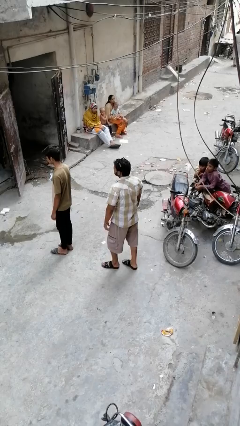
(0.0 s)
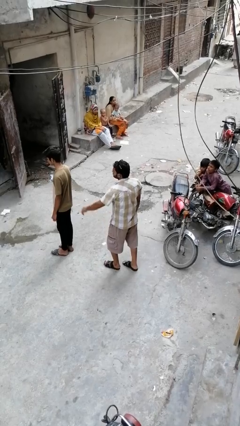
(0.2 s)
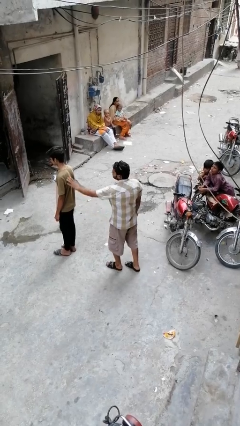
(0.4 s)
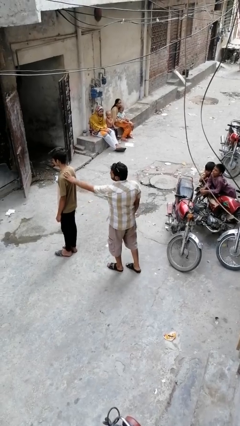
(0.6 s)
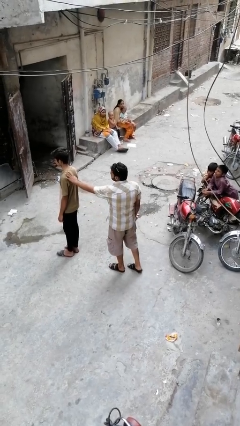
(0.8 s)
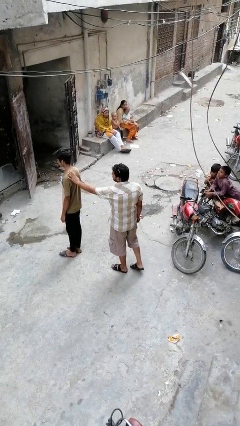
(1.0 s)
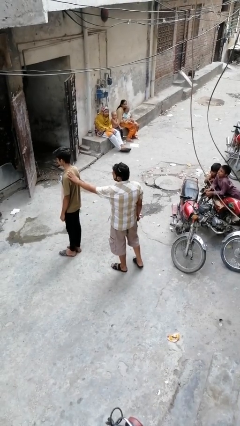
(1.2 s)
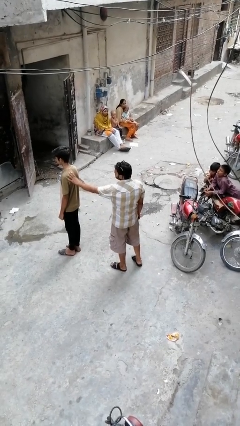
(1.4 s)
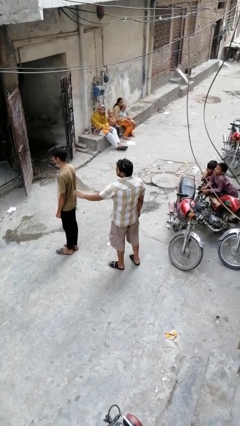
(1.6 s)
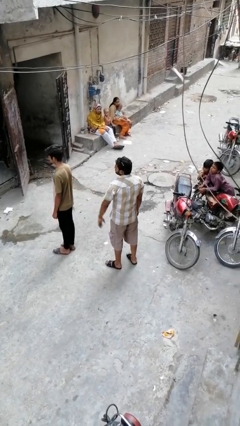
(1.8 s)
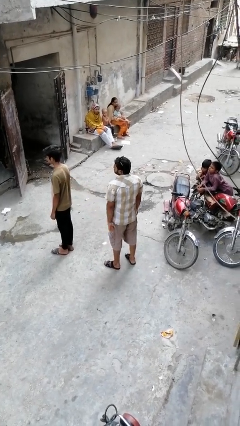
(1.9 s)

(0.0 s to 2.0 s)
person touches back of person

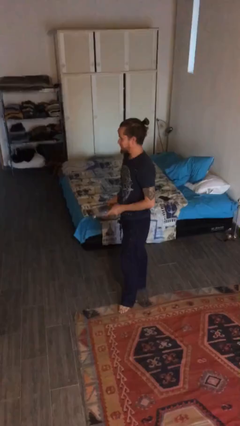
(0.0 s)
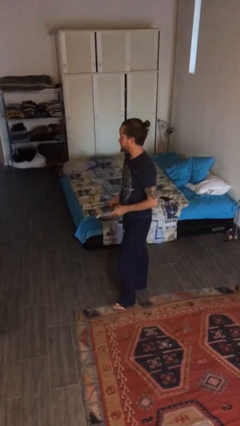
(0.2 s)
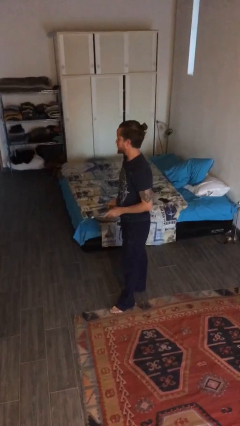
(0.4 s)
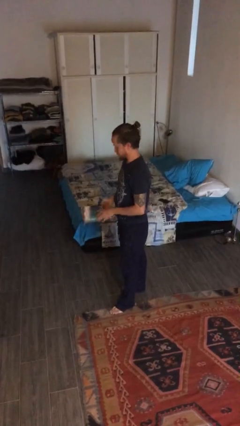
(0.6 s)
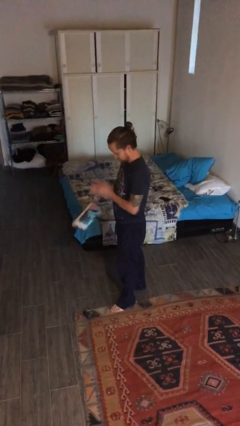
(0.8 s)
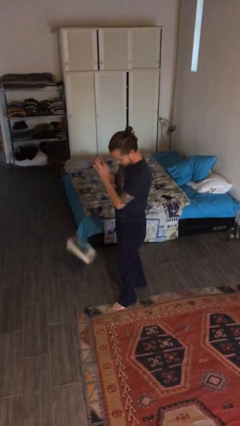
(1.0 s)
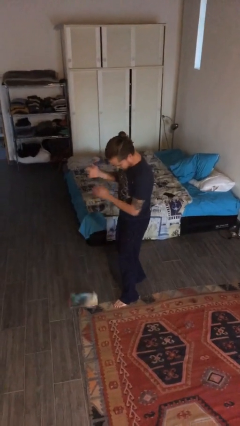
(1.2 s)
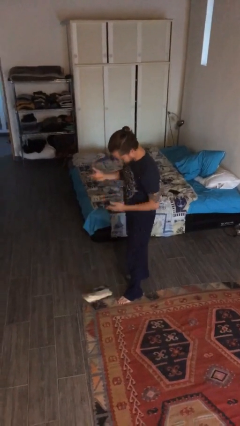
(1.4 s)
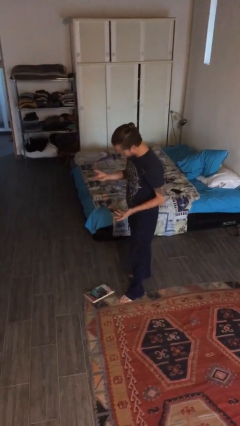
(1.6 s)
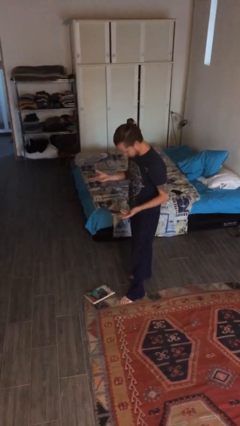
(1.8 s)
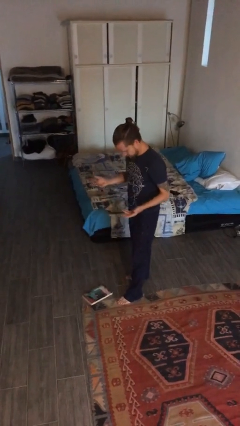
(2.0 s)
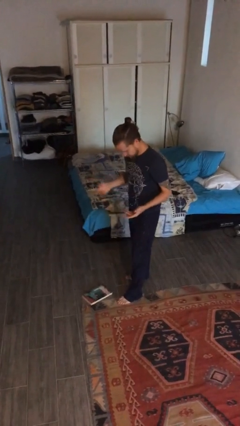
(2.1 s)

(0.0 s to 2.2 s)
person drops object

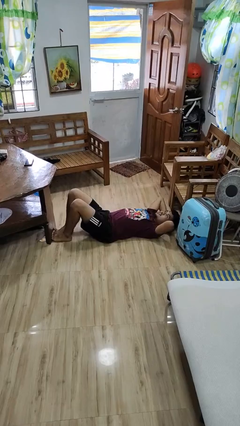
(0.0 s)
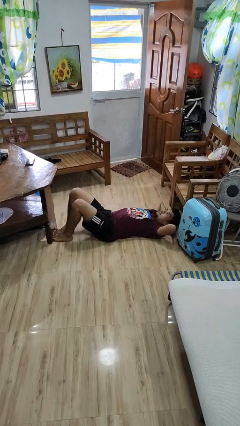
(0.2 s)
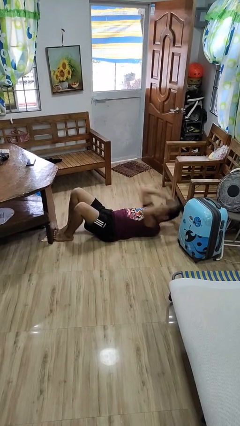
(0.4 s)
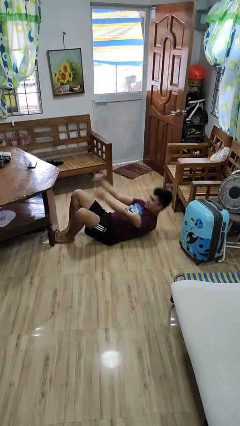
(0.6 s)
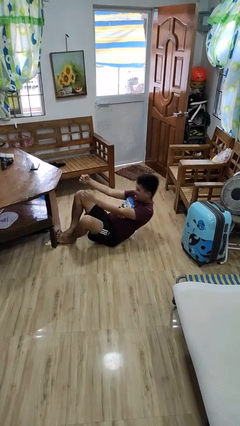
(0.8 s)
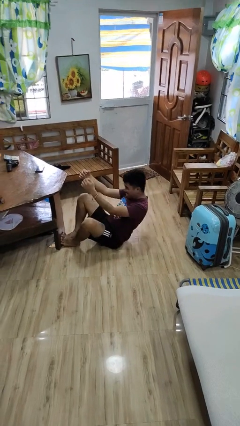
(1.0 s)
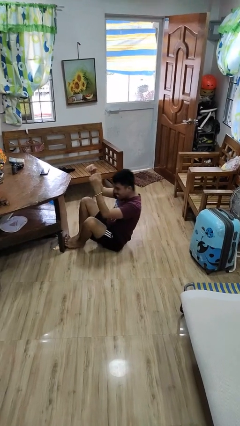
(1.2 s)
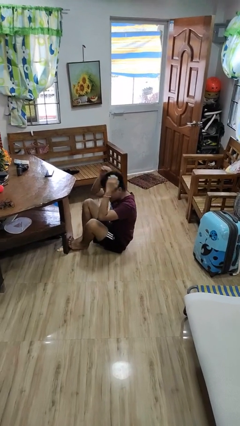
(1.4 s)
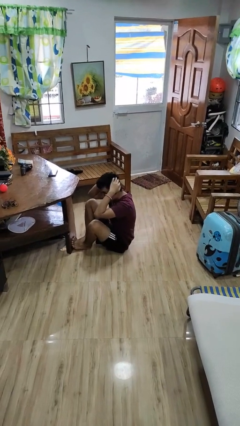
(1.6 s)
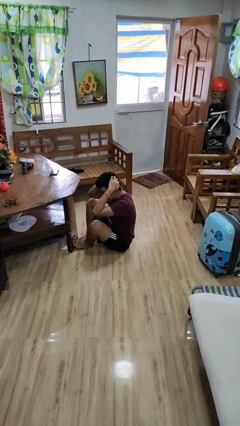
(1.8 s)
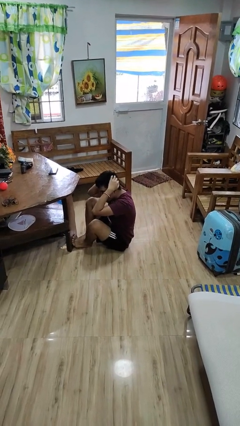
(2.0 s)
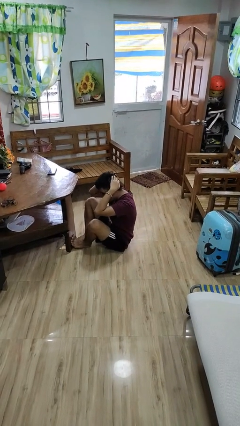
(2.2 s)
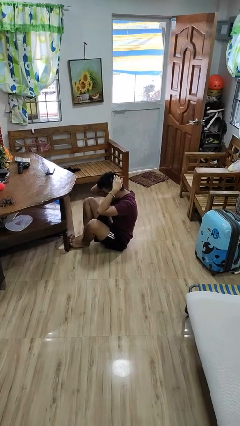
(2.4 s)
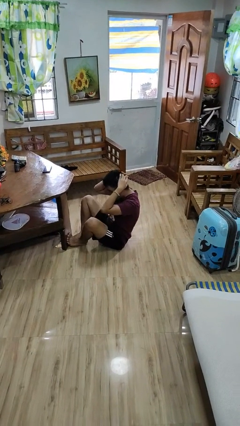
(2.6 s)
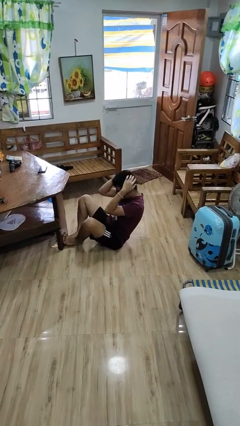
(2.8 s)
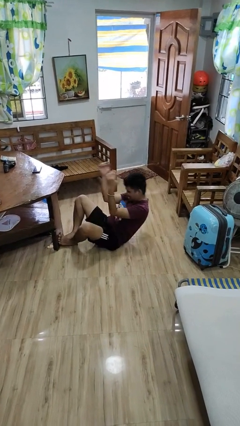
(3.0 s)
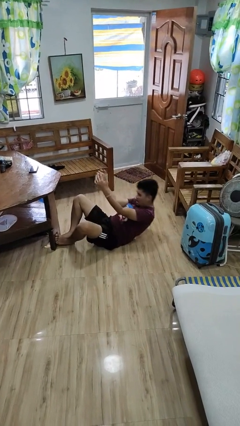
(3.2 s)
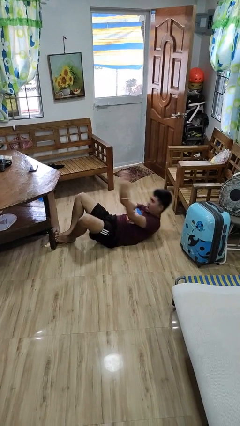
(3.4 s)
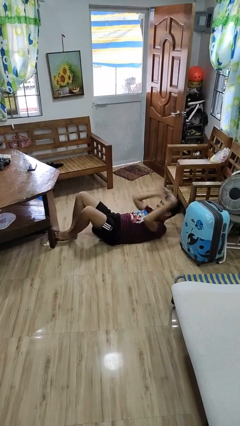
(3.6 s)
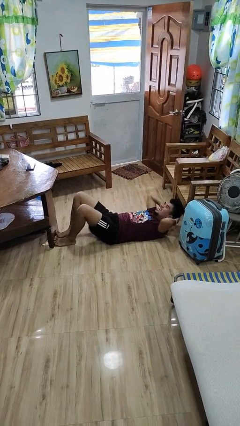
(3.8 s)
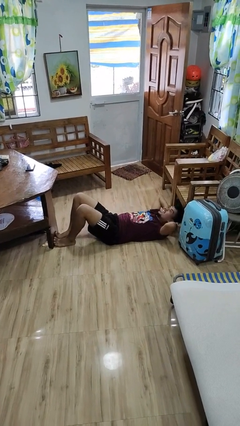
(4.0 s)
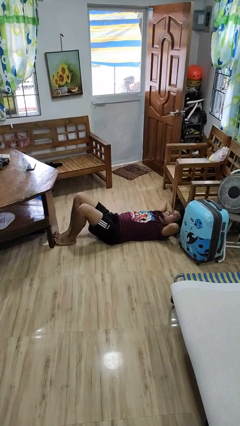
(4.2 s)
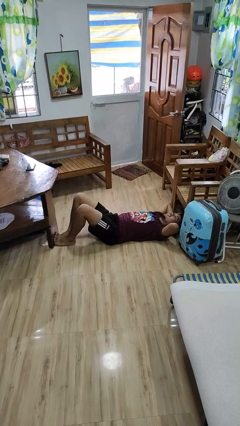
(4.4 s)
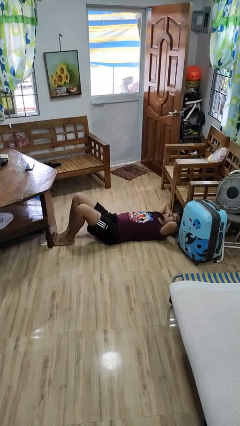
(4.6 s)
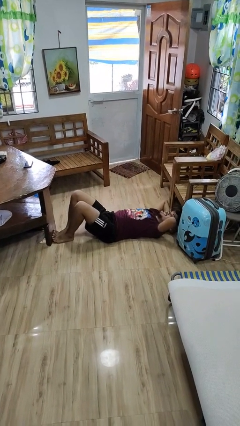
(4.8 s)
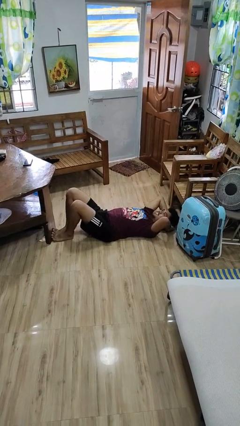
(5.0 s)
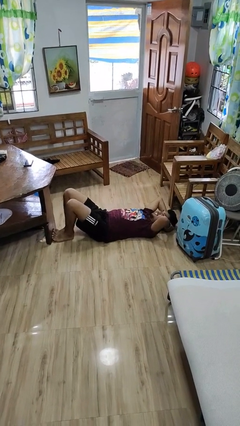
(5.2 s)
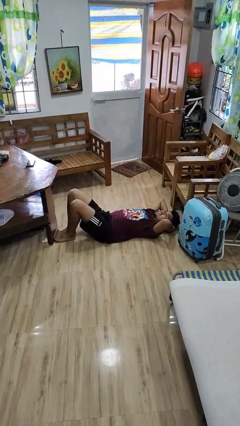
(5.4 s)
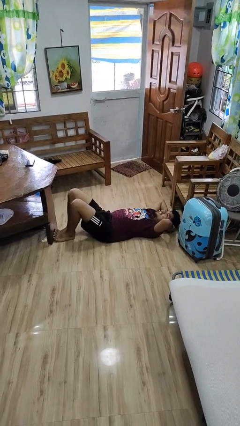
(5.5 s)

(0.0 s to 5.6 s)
person exercises with situp

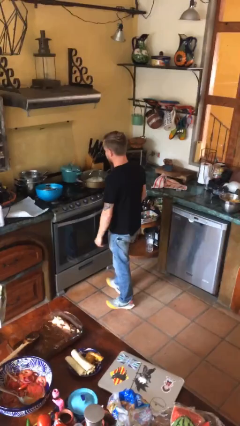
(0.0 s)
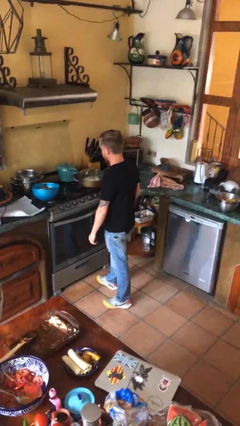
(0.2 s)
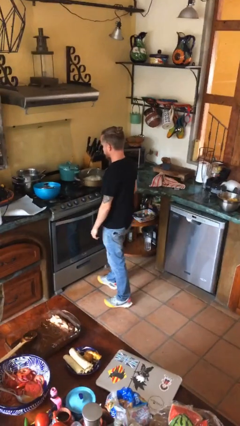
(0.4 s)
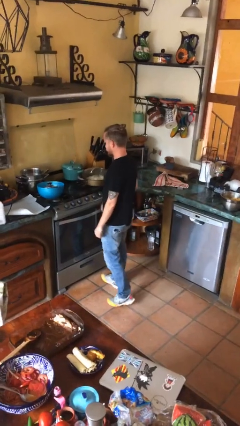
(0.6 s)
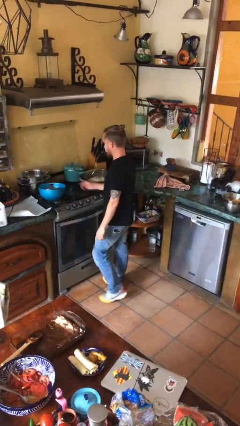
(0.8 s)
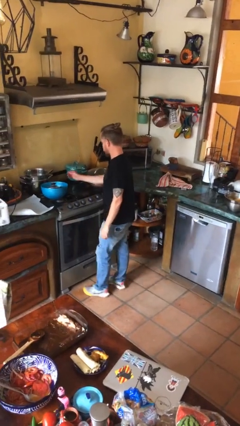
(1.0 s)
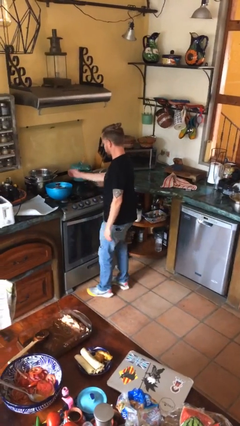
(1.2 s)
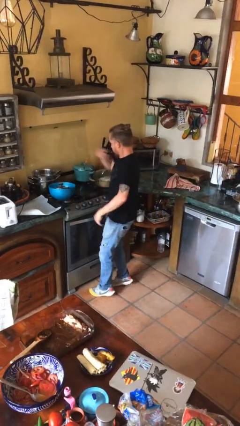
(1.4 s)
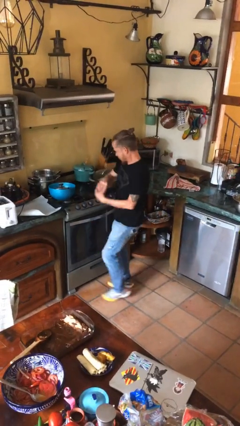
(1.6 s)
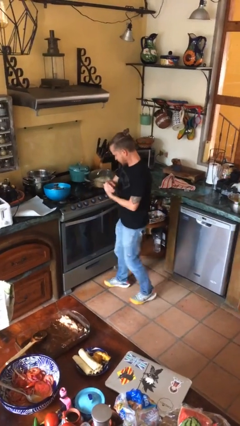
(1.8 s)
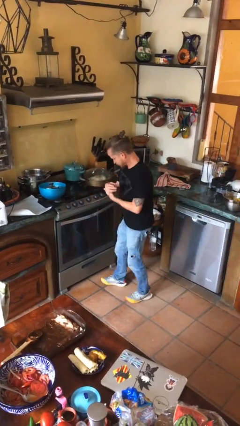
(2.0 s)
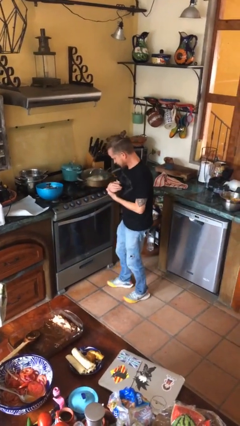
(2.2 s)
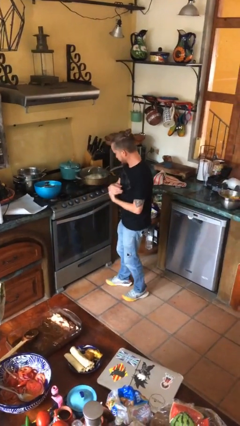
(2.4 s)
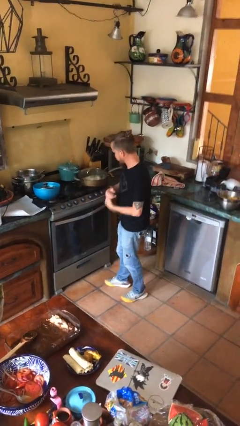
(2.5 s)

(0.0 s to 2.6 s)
person burns hand

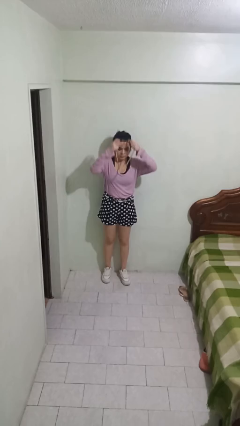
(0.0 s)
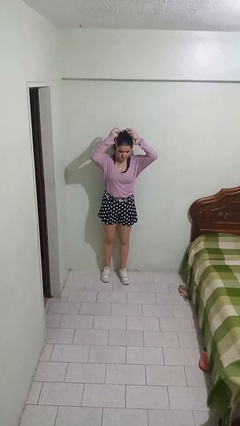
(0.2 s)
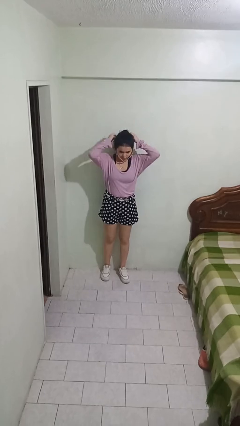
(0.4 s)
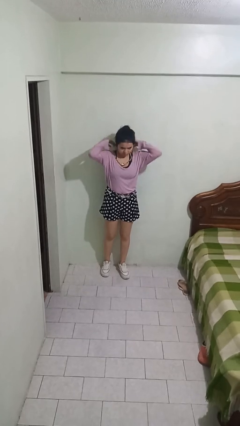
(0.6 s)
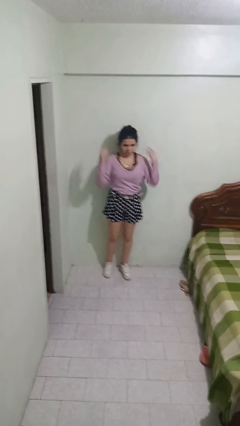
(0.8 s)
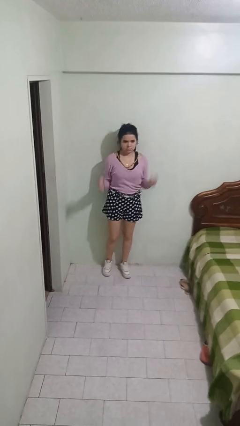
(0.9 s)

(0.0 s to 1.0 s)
person puts on necklace

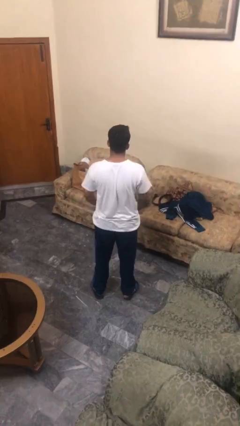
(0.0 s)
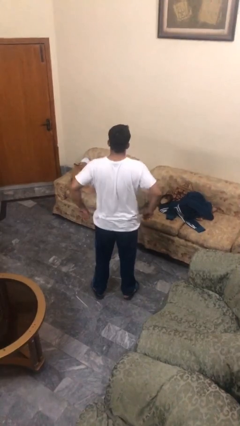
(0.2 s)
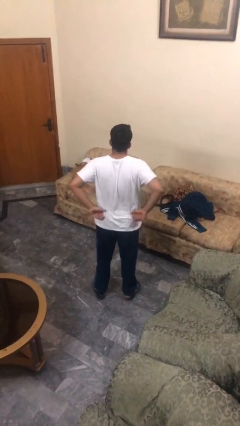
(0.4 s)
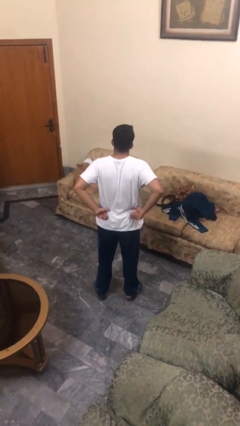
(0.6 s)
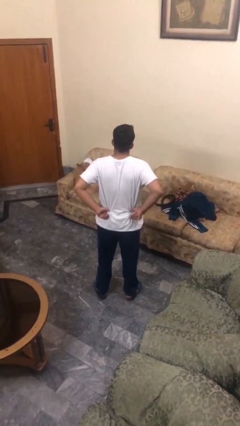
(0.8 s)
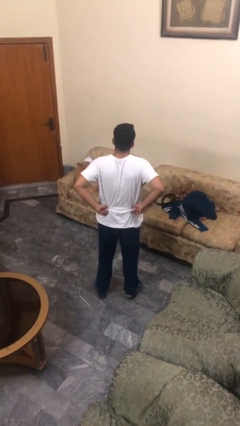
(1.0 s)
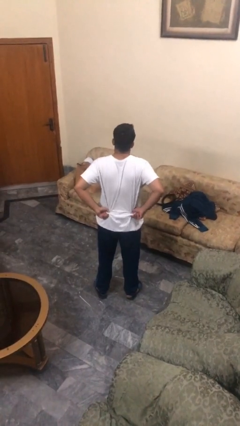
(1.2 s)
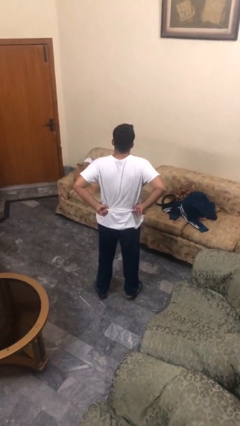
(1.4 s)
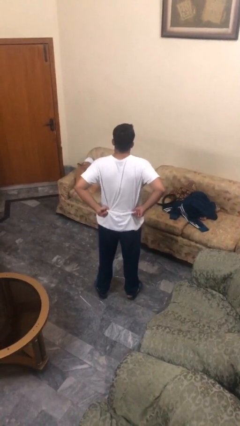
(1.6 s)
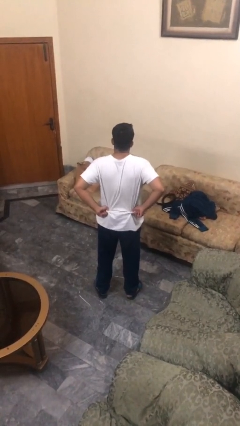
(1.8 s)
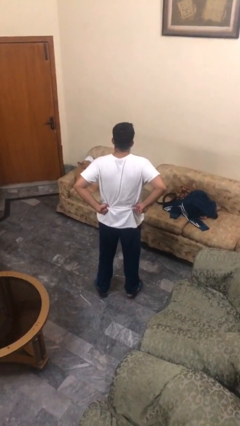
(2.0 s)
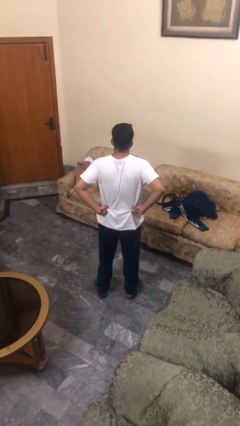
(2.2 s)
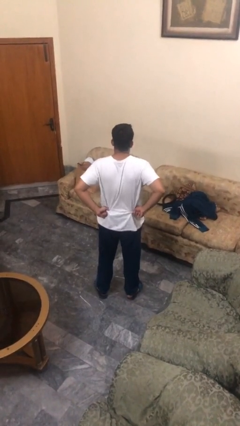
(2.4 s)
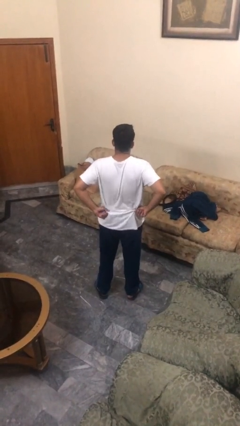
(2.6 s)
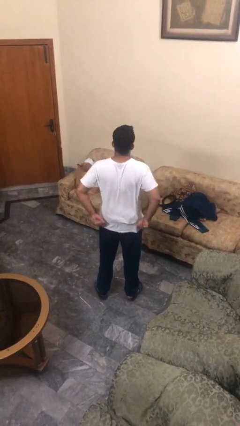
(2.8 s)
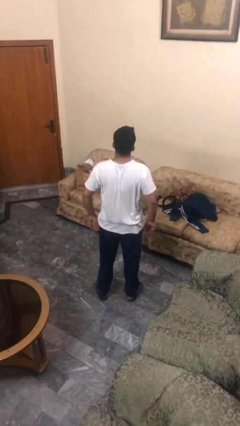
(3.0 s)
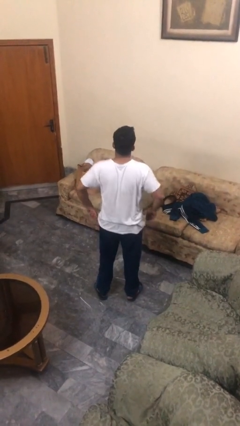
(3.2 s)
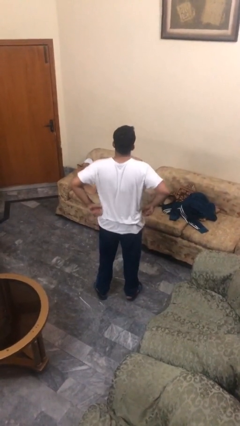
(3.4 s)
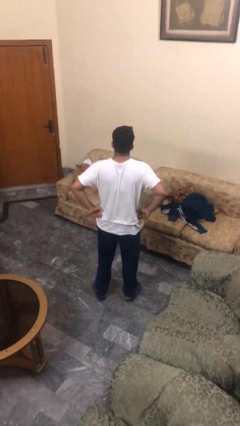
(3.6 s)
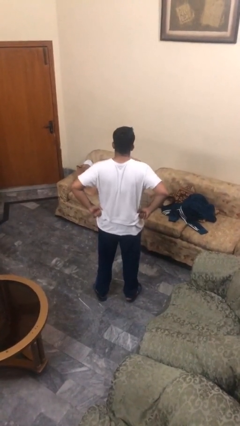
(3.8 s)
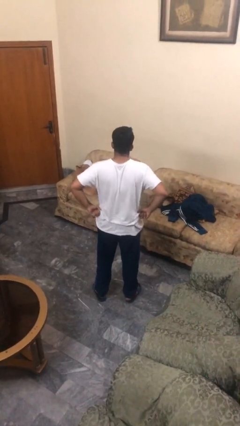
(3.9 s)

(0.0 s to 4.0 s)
person hikes up pants

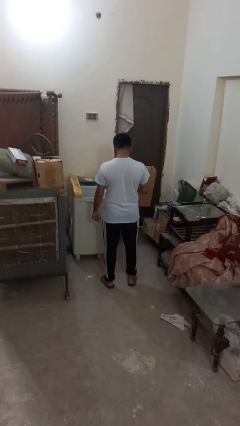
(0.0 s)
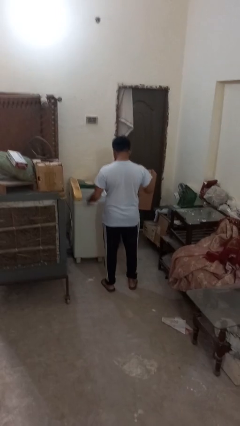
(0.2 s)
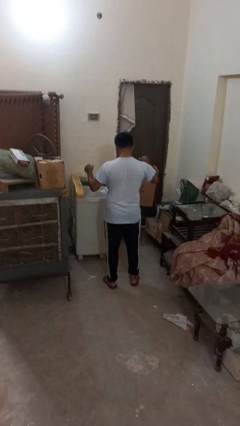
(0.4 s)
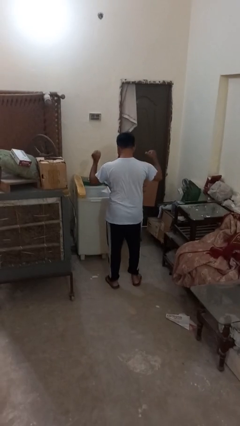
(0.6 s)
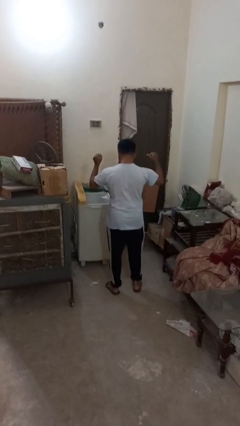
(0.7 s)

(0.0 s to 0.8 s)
person wiggles hips
